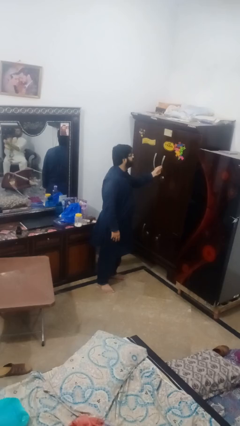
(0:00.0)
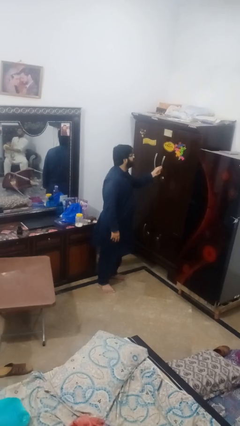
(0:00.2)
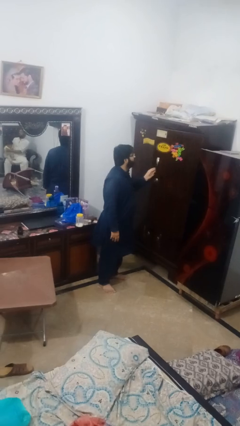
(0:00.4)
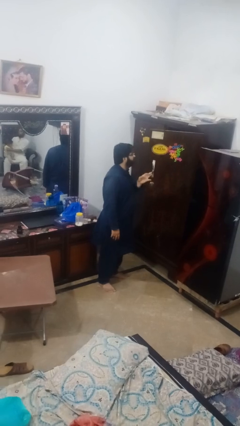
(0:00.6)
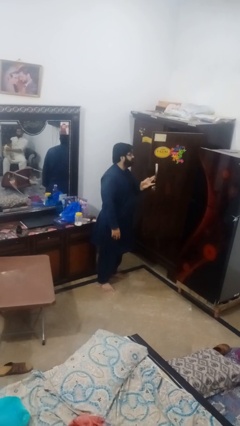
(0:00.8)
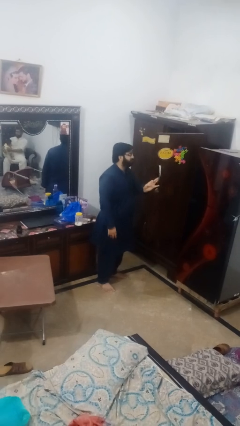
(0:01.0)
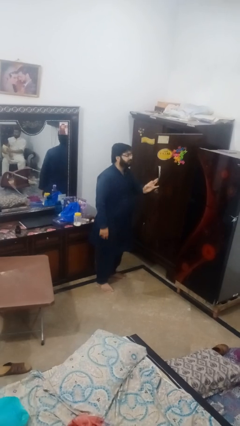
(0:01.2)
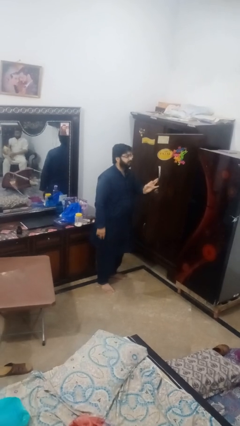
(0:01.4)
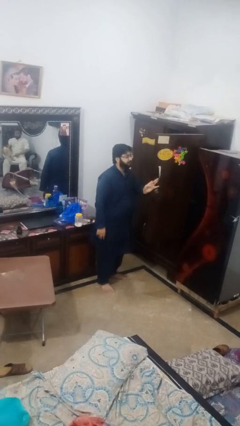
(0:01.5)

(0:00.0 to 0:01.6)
person opens closet door

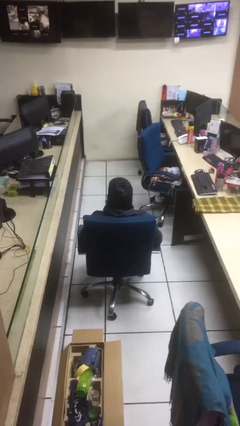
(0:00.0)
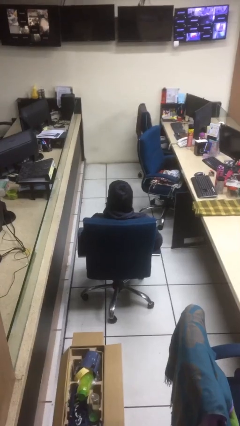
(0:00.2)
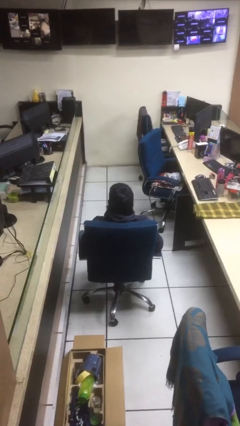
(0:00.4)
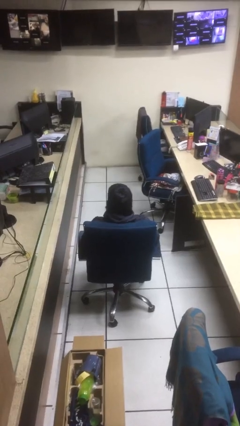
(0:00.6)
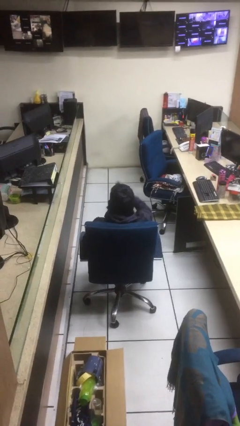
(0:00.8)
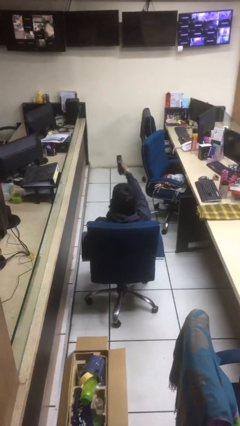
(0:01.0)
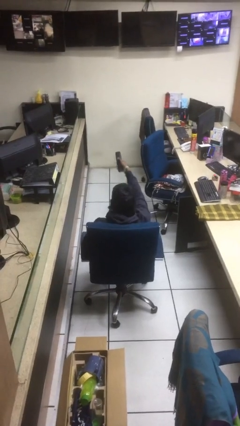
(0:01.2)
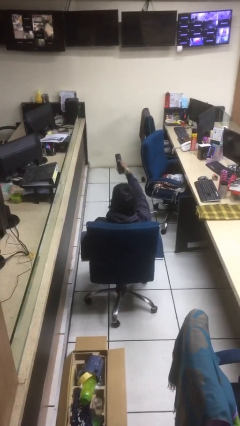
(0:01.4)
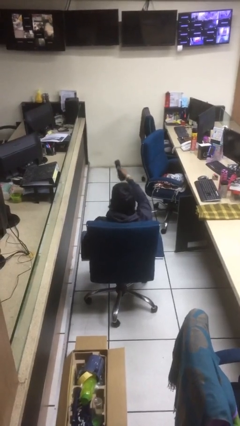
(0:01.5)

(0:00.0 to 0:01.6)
person uses television remote

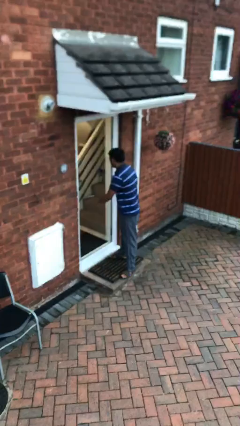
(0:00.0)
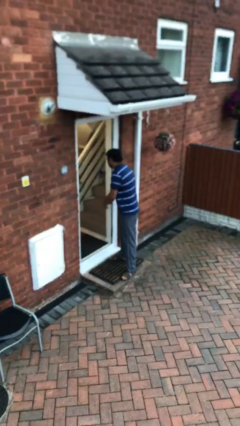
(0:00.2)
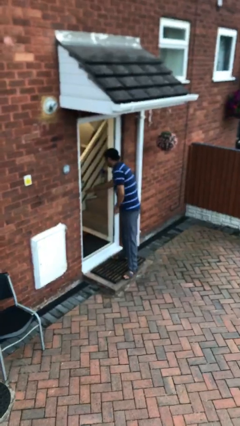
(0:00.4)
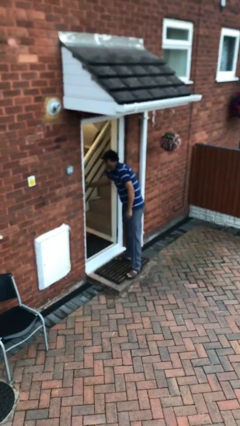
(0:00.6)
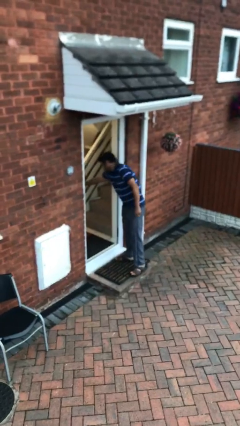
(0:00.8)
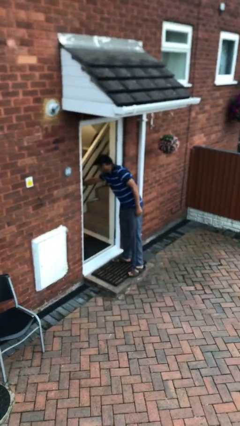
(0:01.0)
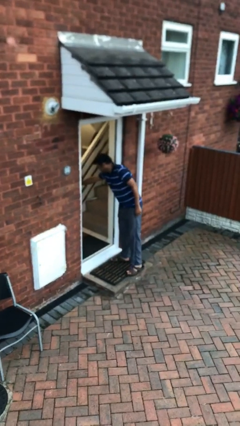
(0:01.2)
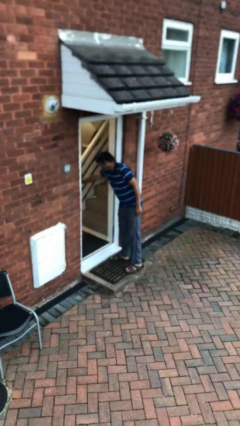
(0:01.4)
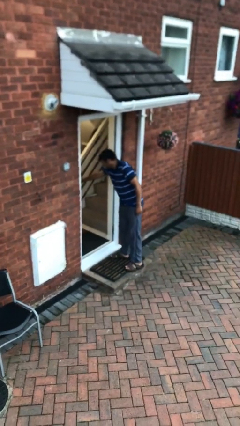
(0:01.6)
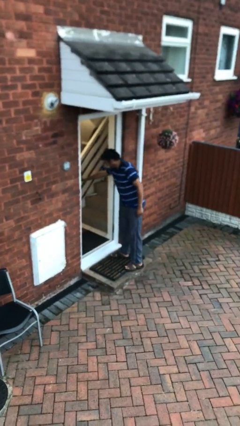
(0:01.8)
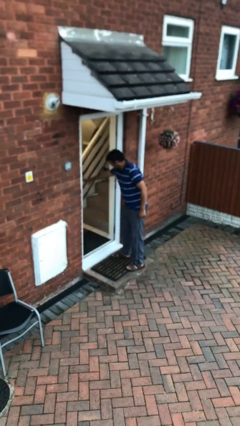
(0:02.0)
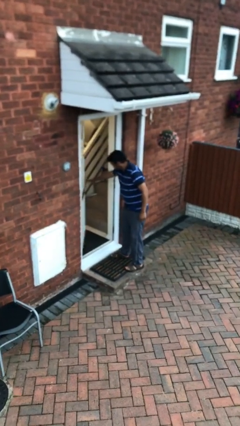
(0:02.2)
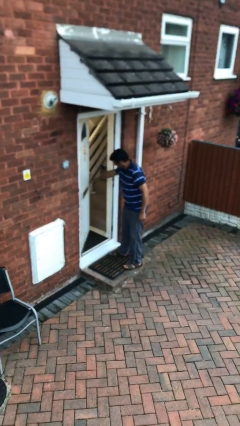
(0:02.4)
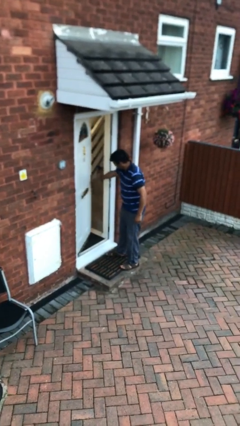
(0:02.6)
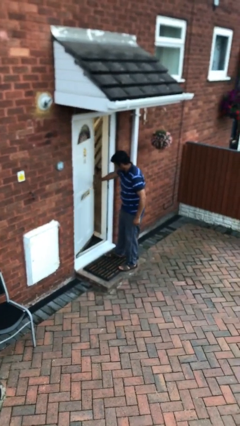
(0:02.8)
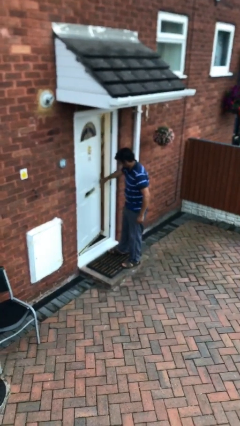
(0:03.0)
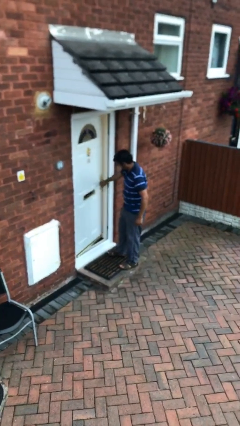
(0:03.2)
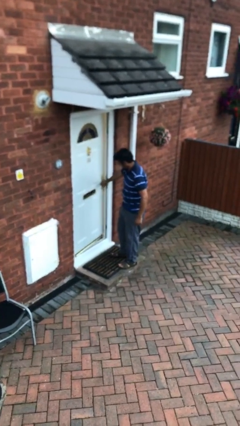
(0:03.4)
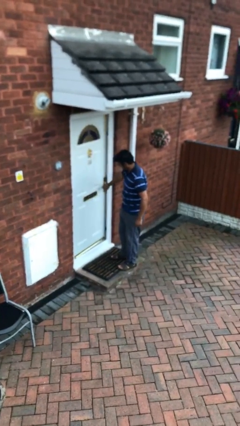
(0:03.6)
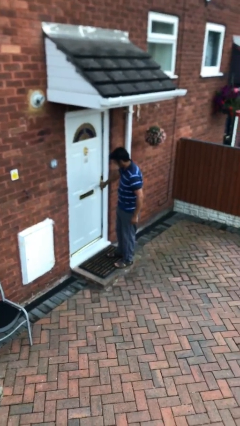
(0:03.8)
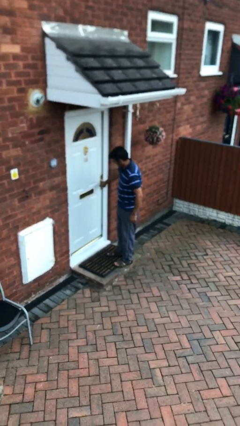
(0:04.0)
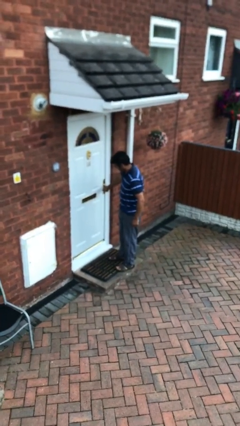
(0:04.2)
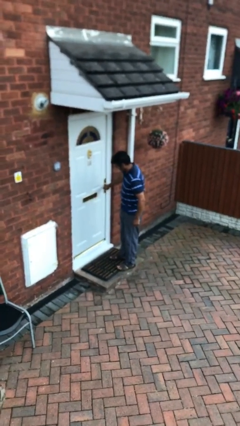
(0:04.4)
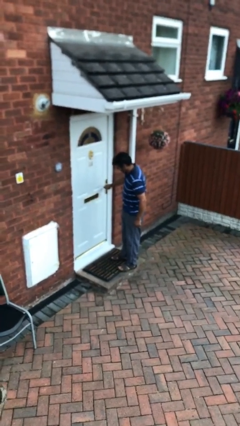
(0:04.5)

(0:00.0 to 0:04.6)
person closes facility door

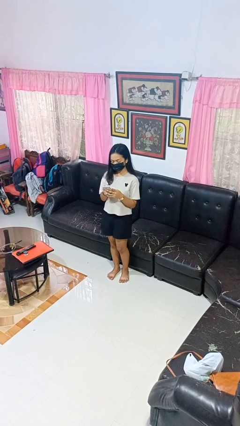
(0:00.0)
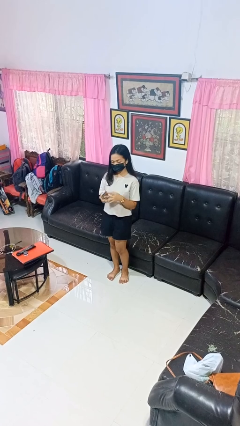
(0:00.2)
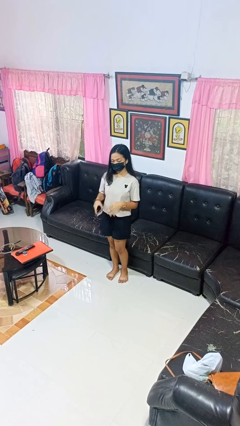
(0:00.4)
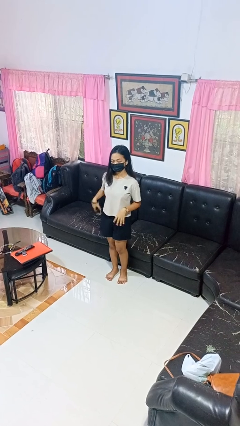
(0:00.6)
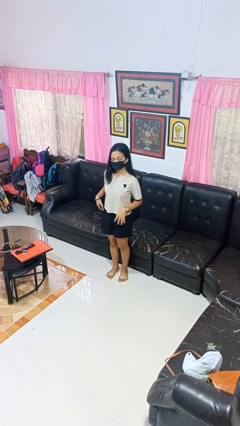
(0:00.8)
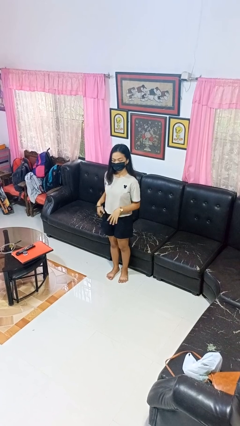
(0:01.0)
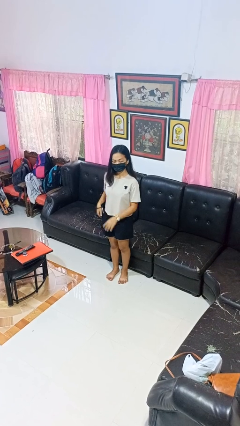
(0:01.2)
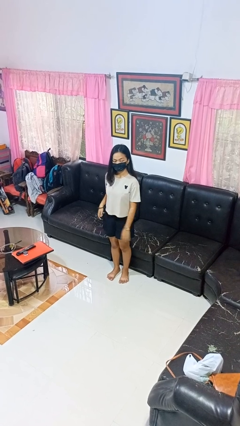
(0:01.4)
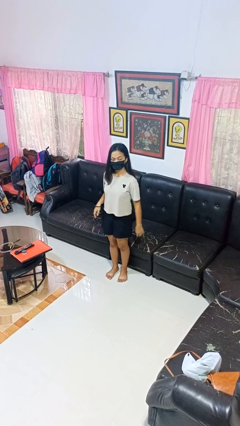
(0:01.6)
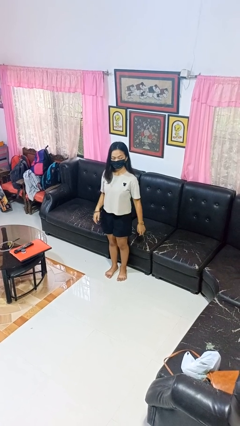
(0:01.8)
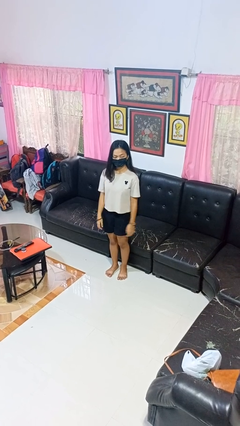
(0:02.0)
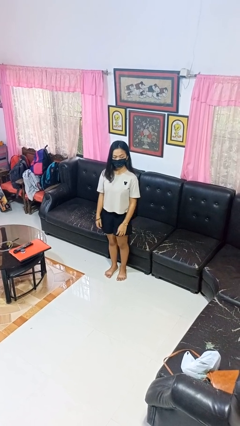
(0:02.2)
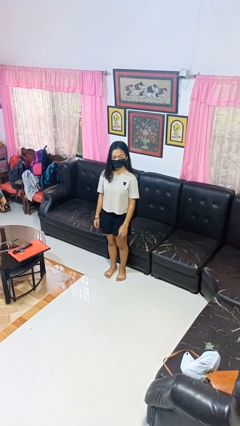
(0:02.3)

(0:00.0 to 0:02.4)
person puts phone into pocket

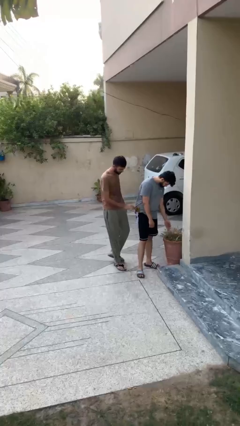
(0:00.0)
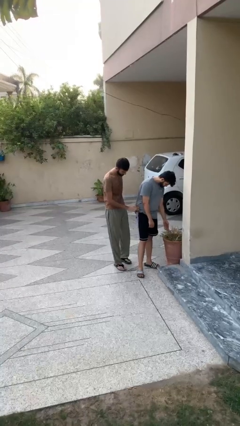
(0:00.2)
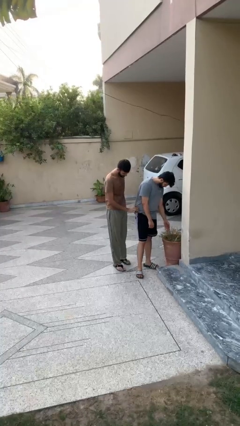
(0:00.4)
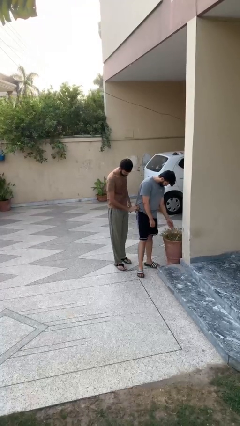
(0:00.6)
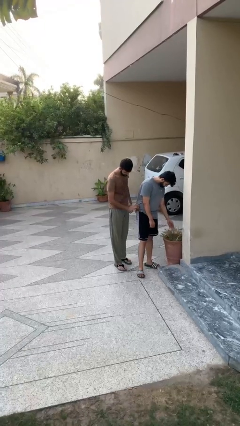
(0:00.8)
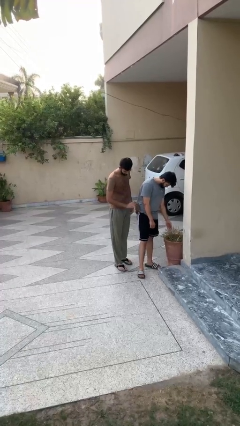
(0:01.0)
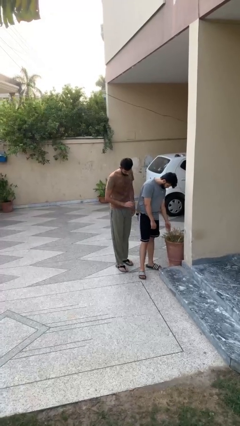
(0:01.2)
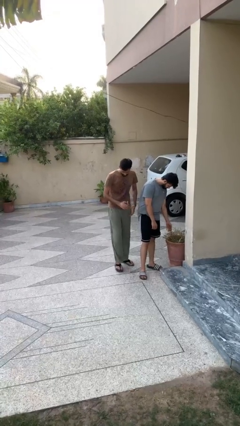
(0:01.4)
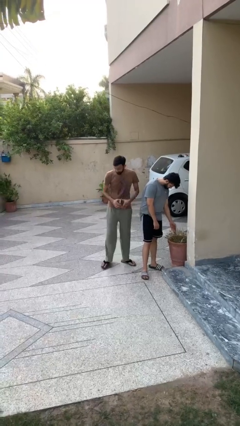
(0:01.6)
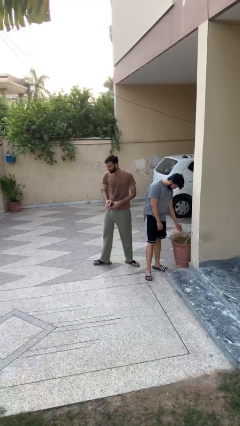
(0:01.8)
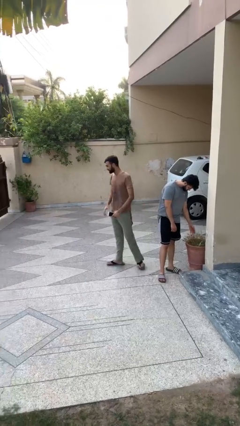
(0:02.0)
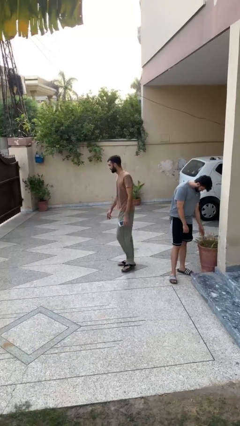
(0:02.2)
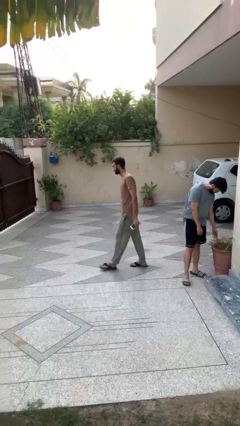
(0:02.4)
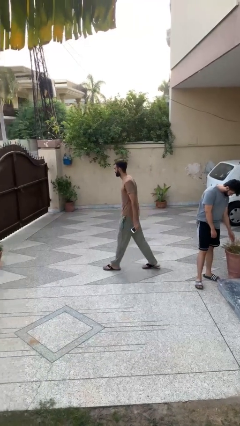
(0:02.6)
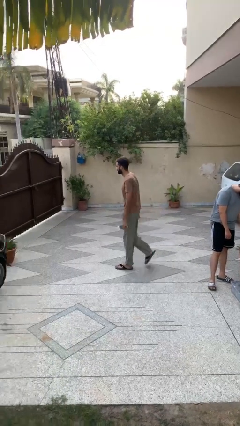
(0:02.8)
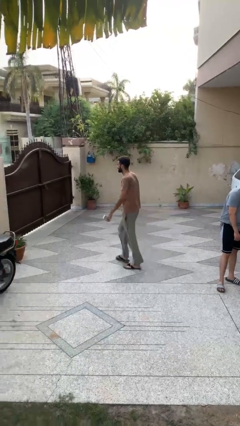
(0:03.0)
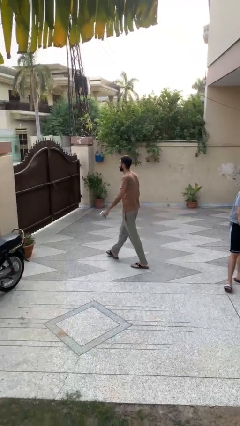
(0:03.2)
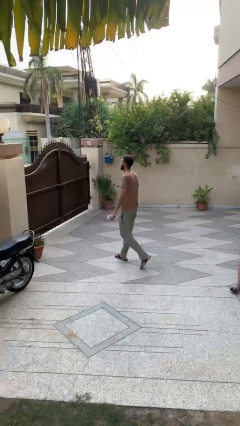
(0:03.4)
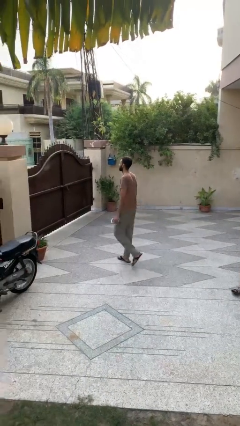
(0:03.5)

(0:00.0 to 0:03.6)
person steals object from person

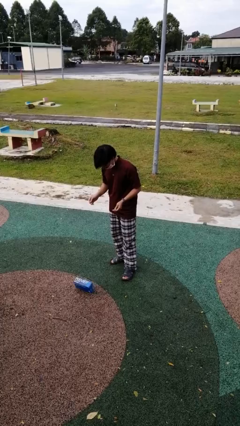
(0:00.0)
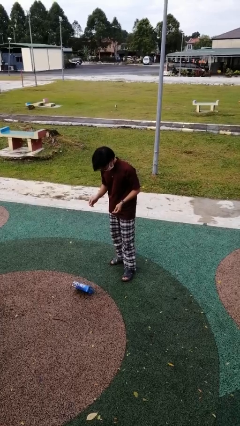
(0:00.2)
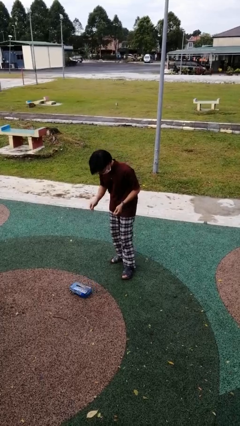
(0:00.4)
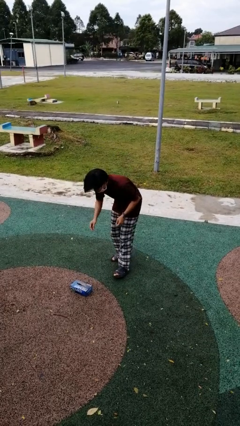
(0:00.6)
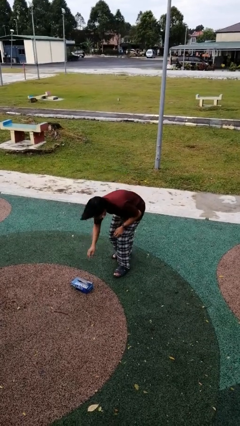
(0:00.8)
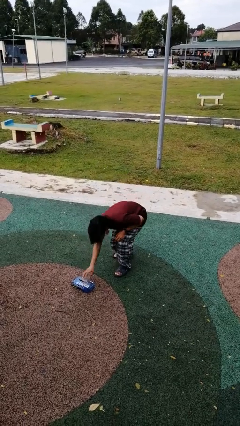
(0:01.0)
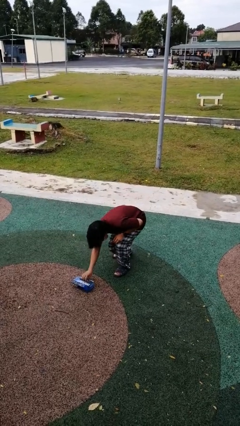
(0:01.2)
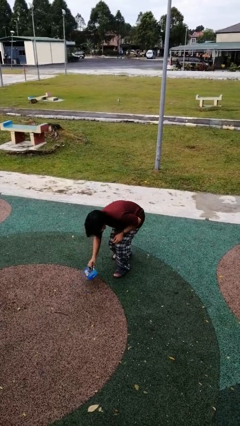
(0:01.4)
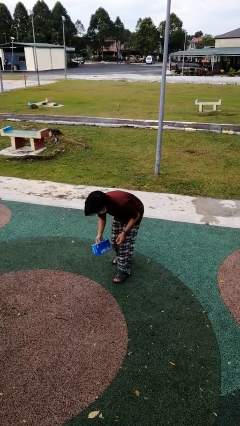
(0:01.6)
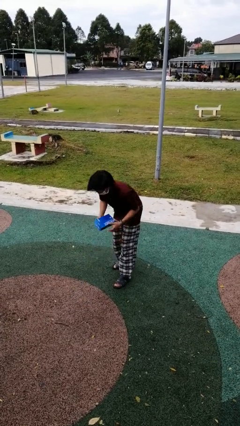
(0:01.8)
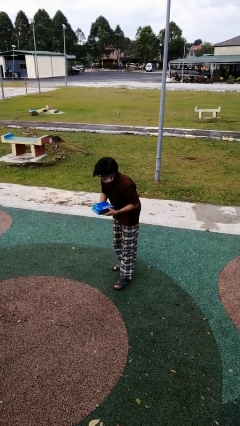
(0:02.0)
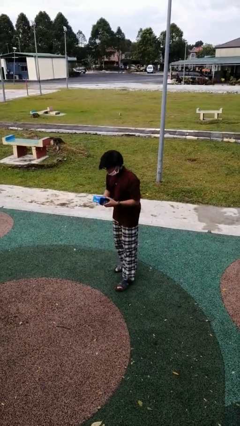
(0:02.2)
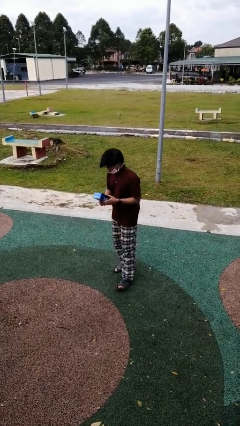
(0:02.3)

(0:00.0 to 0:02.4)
person picks up object from floor

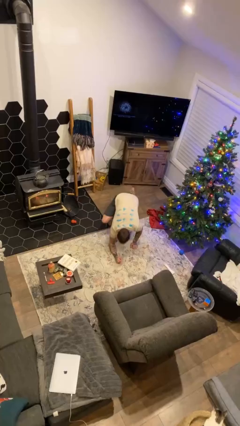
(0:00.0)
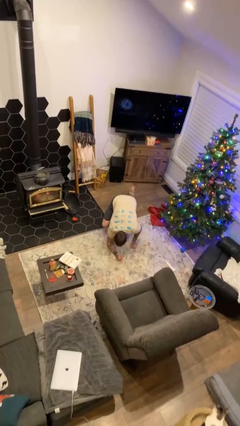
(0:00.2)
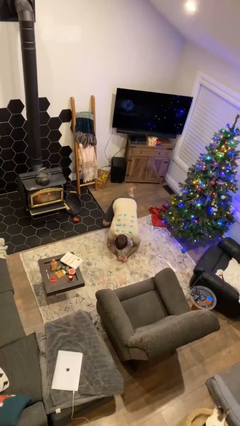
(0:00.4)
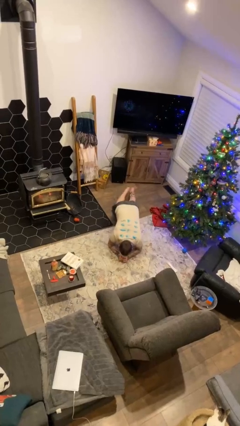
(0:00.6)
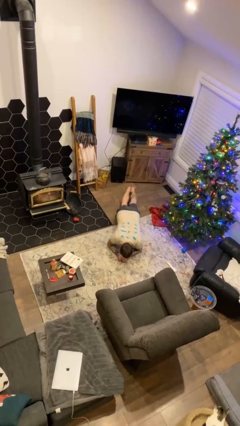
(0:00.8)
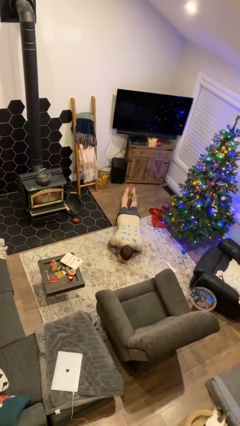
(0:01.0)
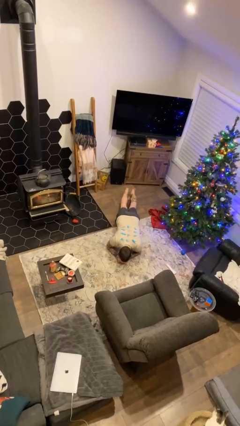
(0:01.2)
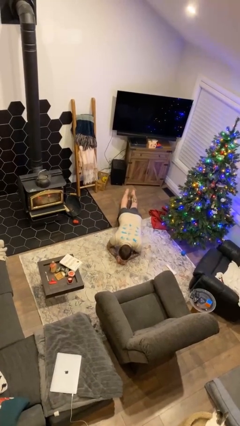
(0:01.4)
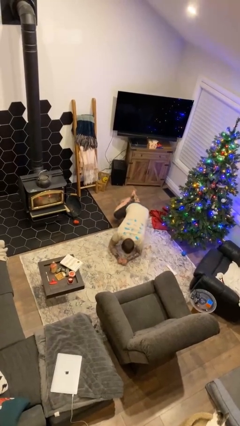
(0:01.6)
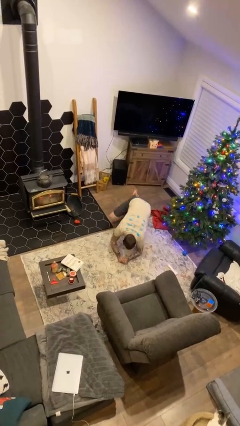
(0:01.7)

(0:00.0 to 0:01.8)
person exercises with plank
